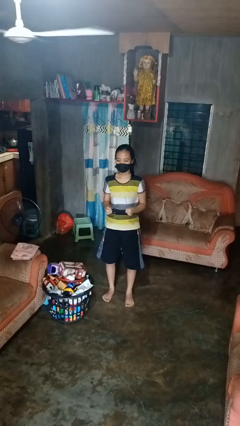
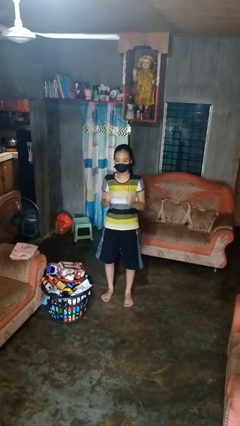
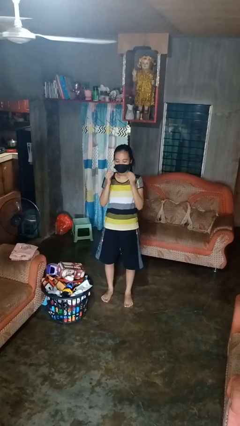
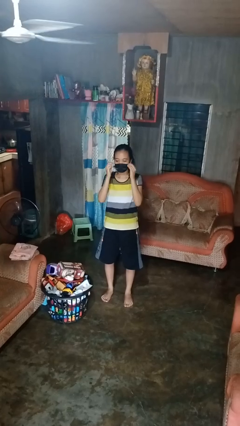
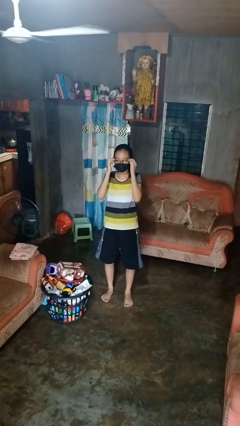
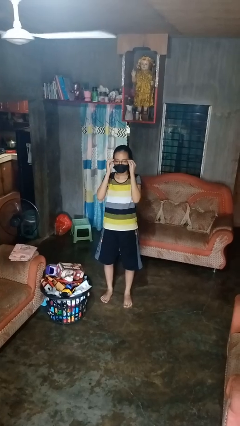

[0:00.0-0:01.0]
person puts on glasses

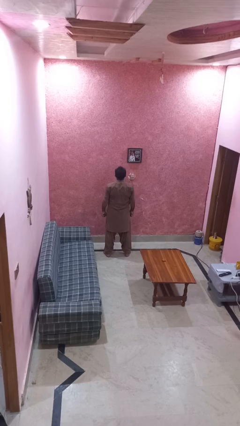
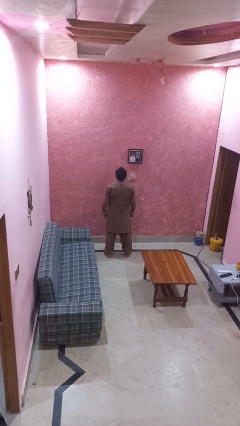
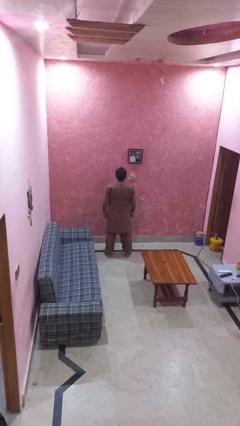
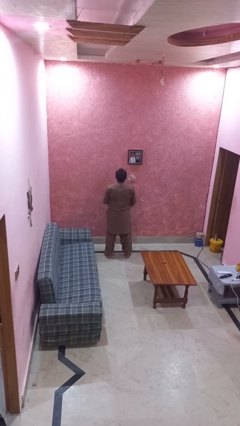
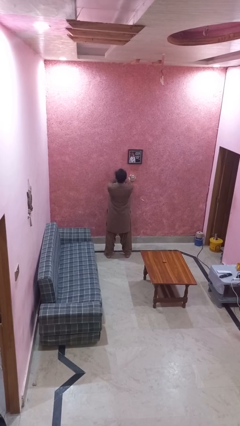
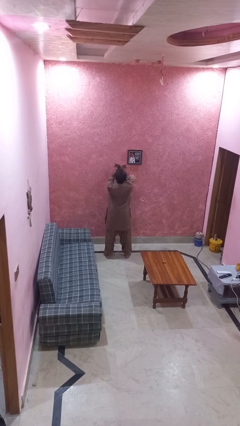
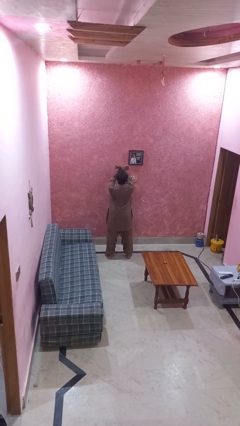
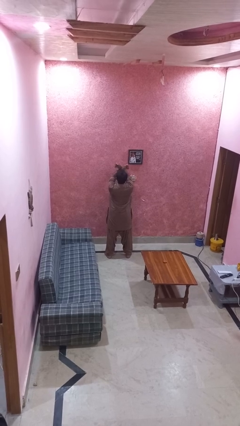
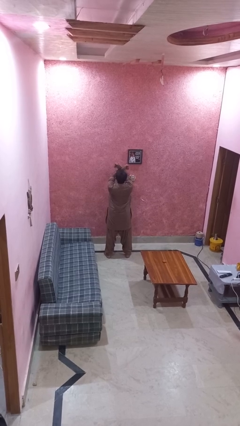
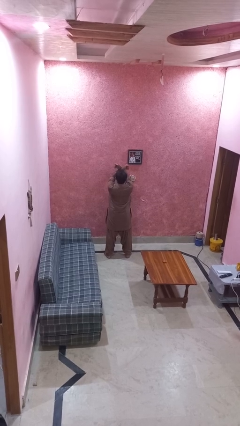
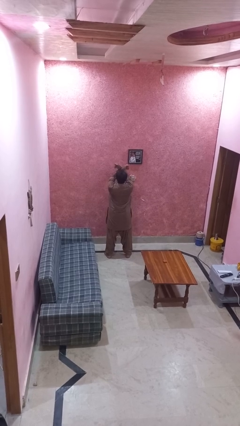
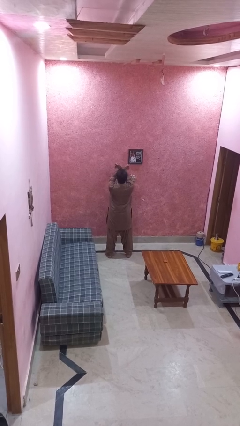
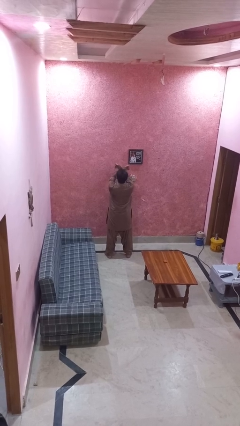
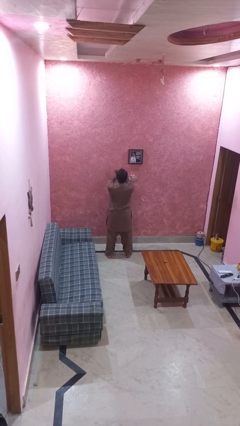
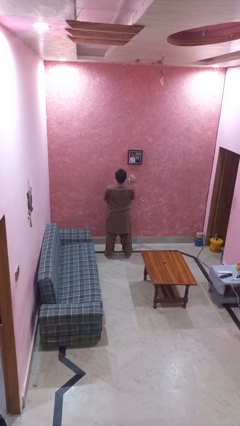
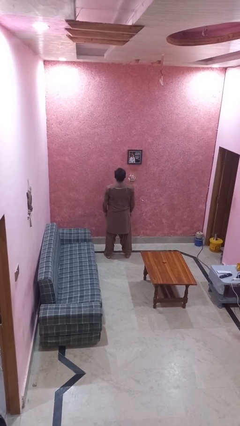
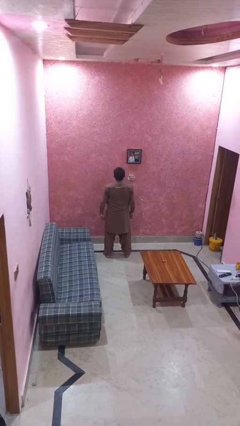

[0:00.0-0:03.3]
person gestures arms x

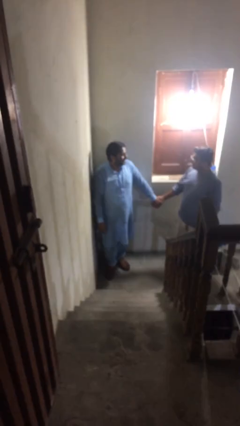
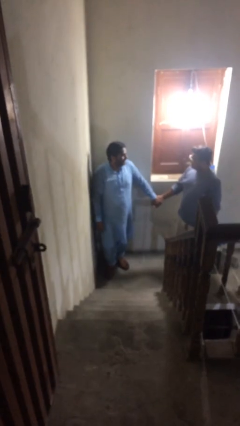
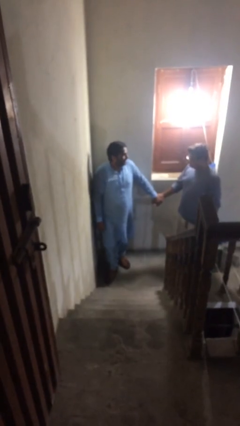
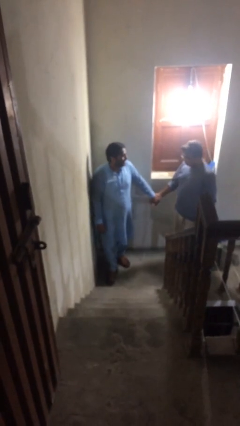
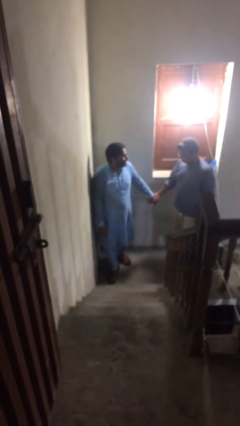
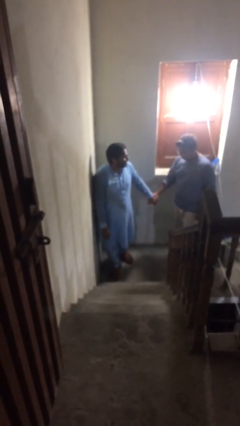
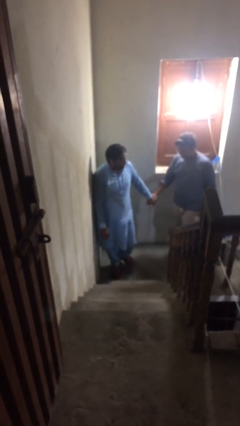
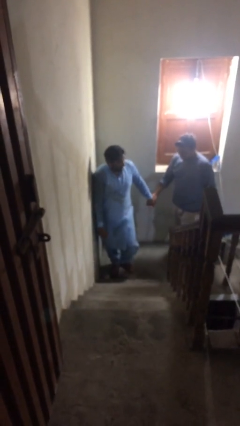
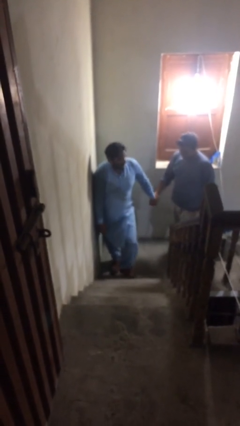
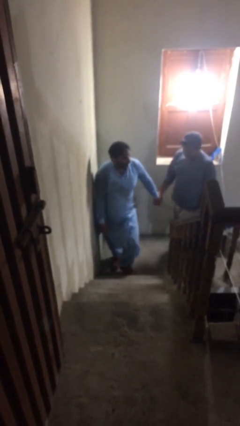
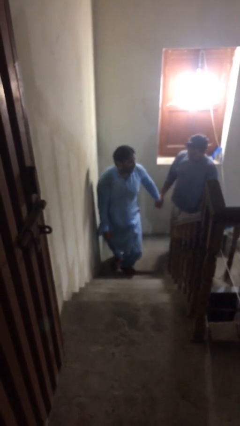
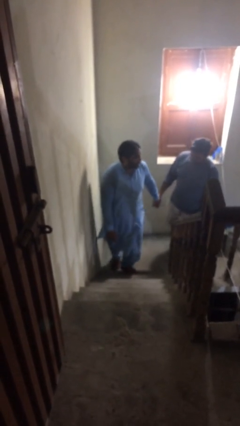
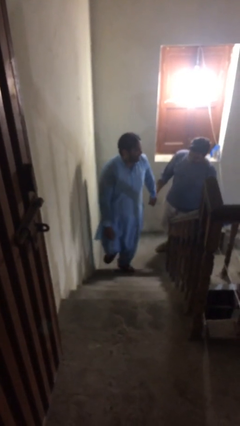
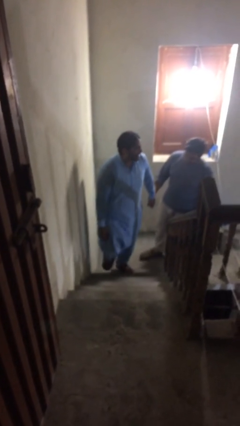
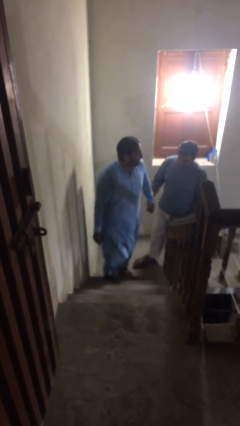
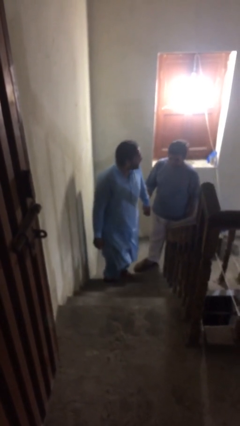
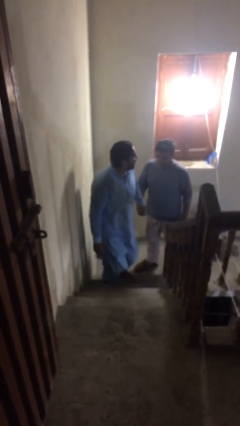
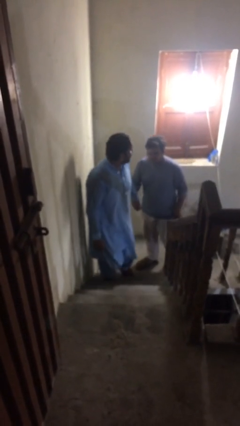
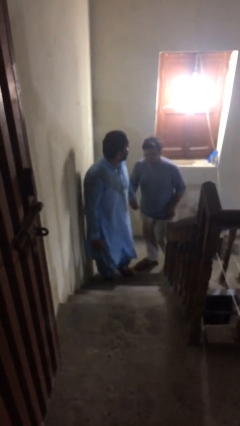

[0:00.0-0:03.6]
person holds hand

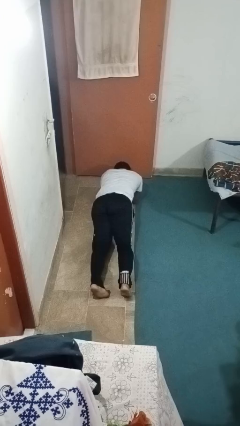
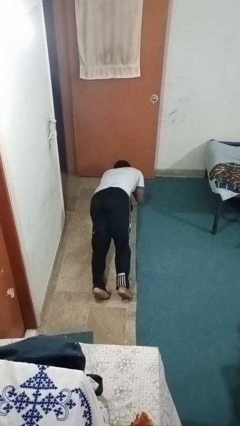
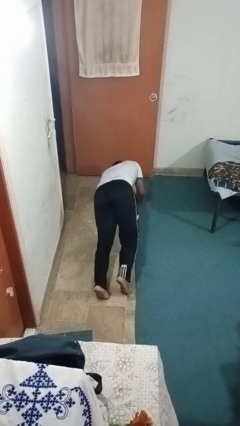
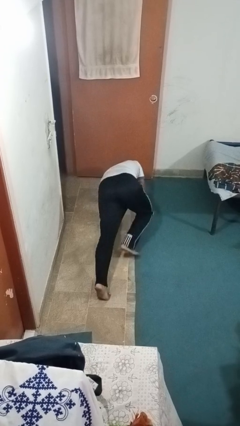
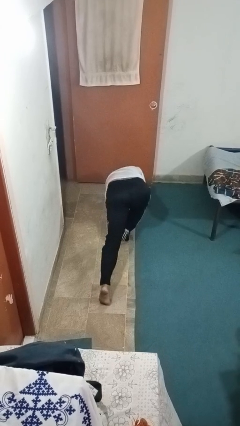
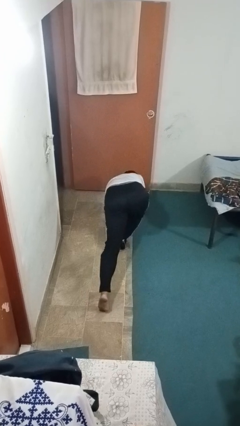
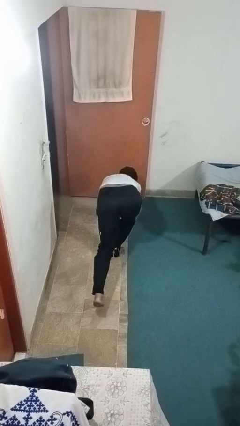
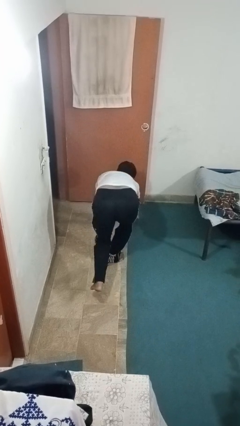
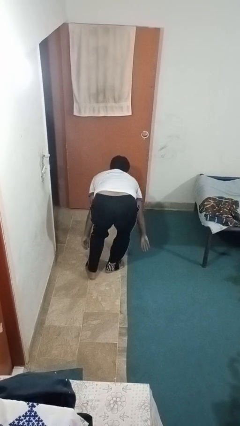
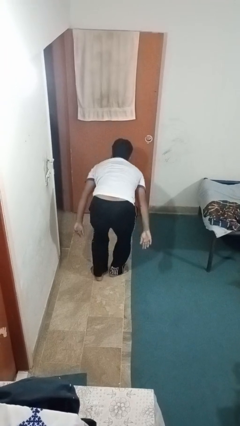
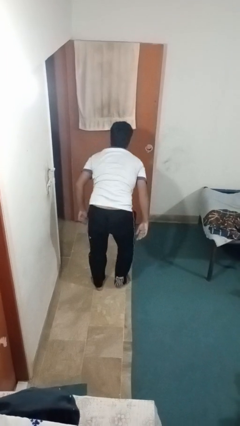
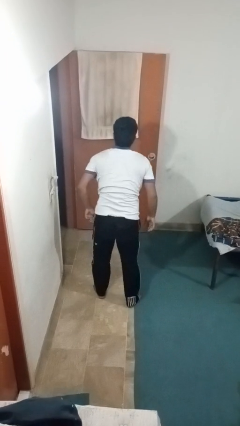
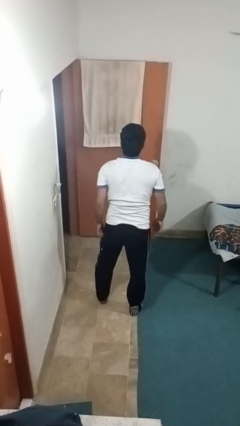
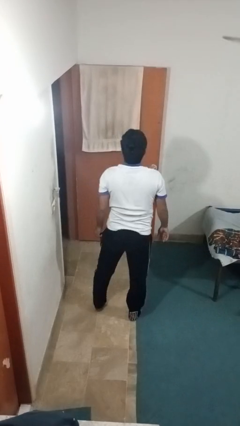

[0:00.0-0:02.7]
person stands up from floor

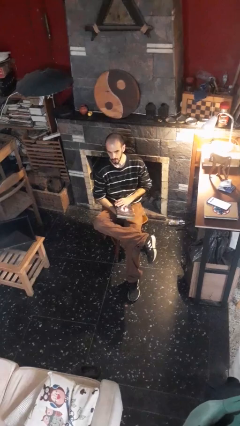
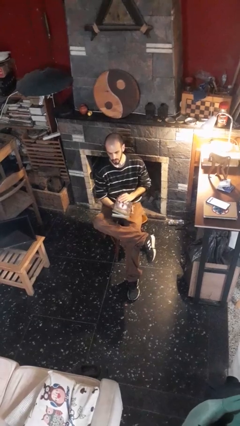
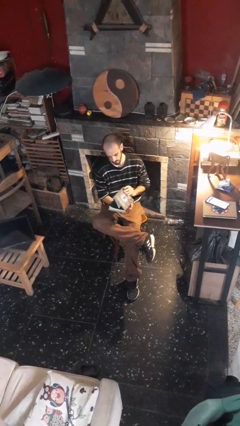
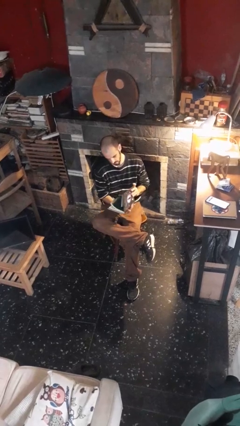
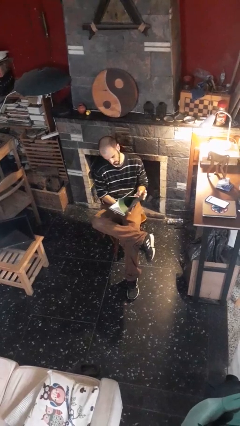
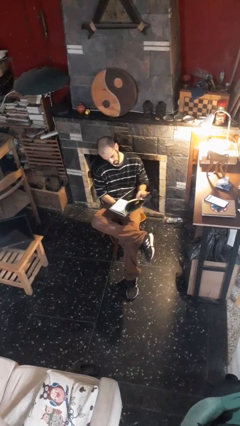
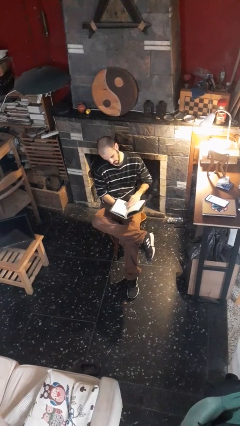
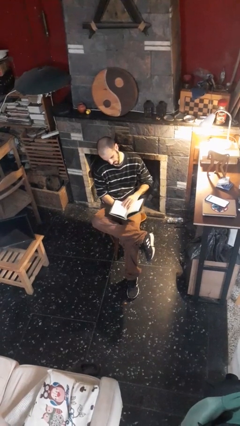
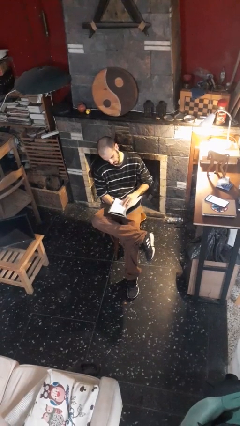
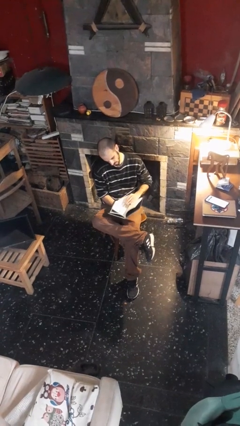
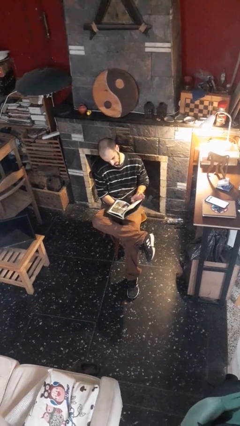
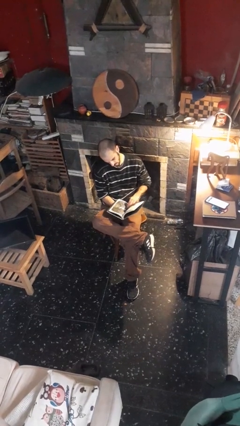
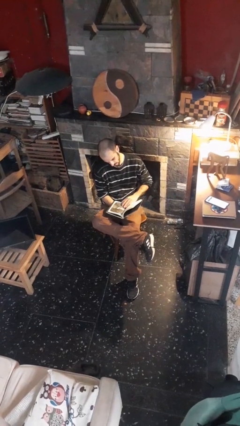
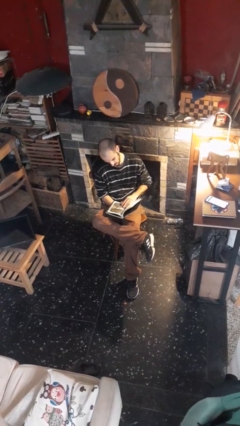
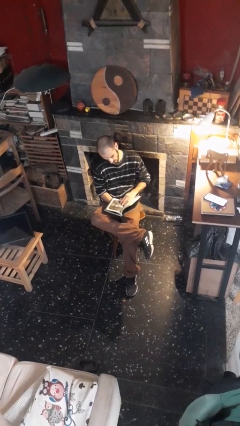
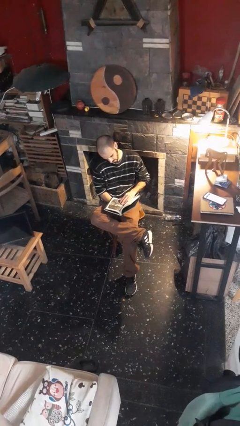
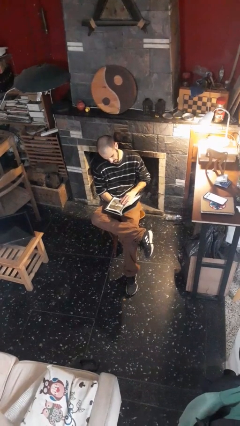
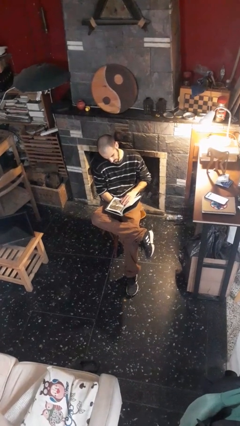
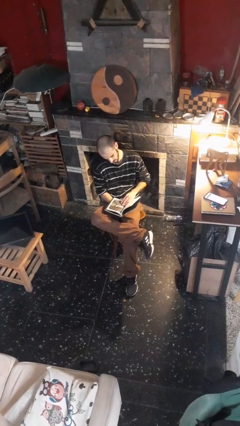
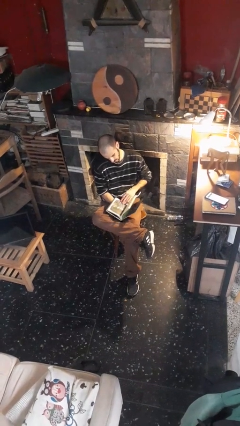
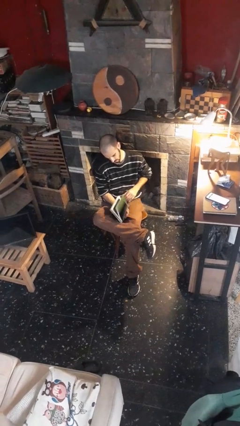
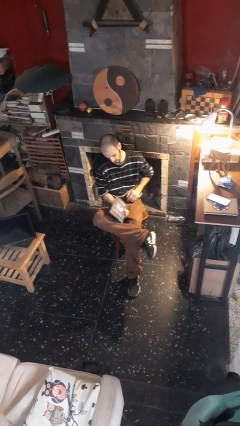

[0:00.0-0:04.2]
person reads book

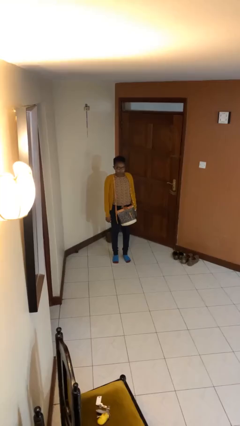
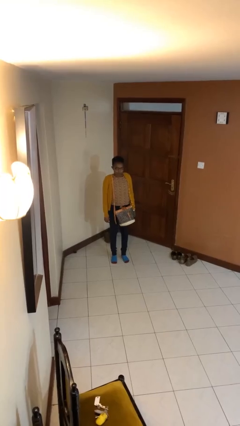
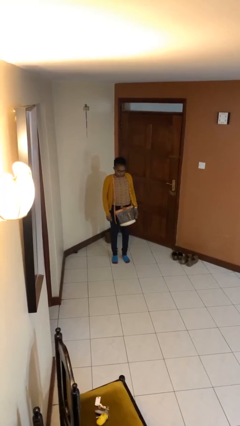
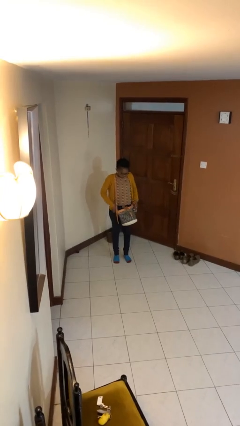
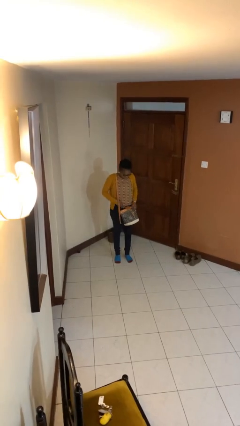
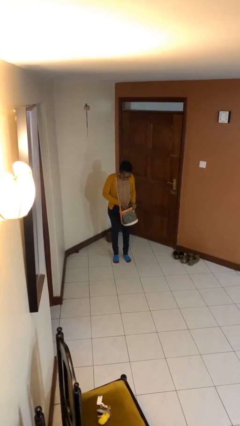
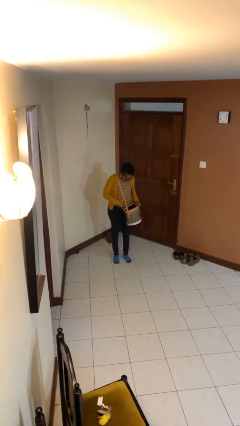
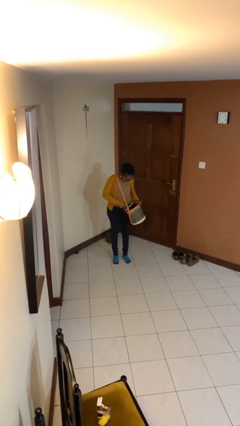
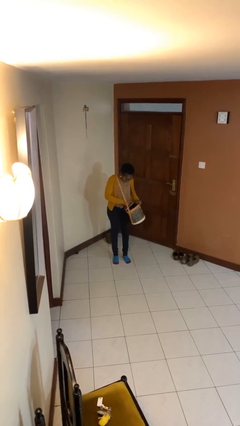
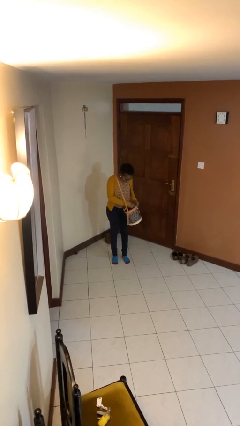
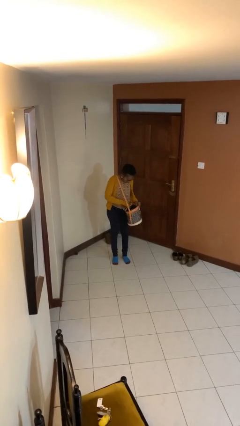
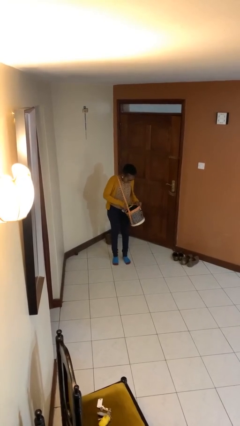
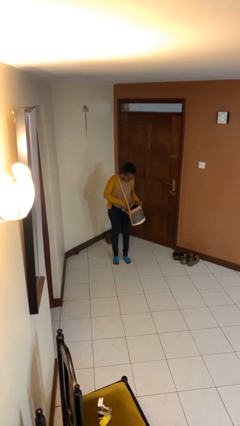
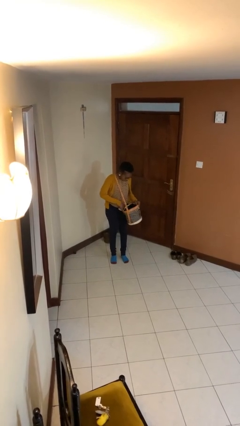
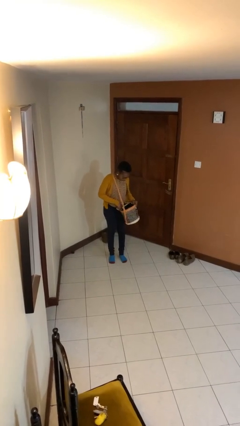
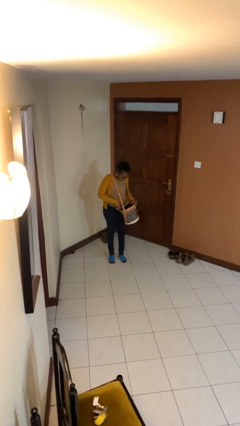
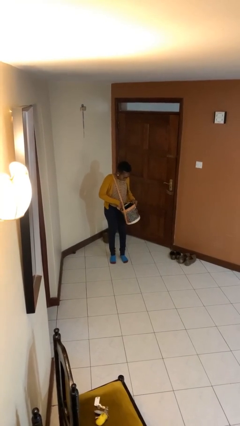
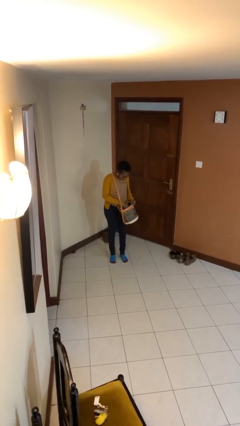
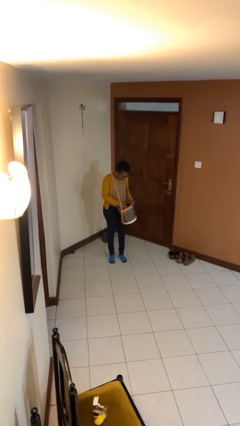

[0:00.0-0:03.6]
person searches in purse
